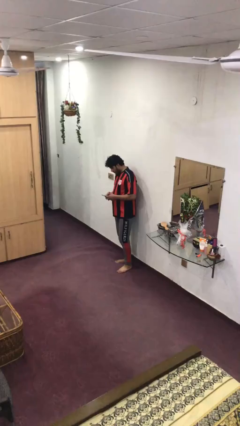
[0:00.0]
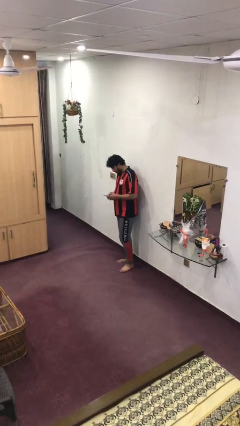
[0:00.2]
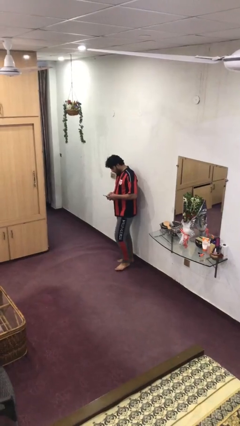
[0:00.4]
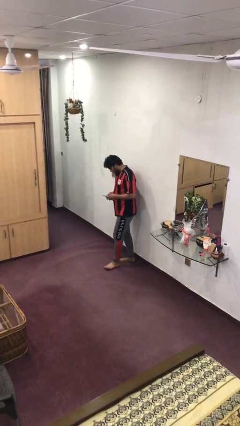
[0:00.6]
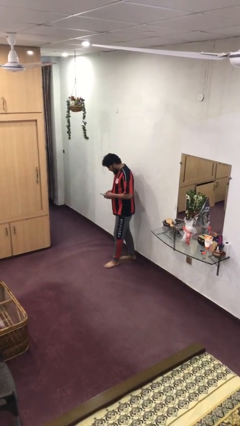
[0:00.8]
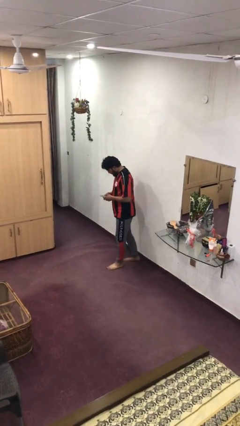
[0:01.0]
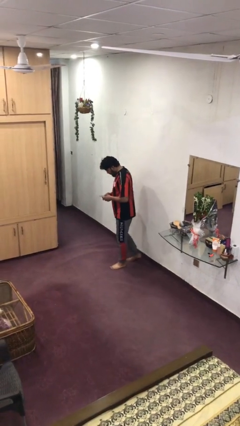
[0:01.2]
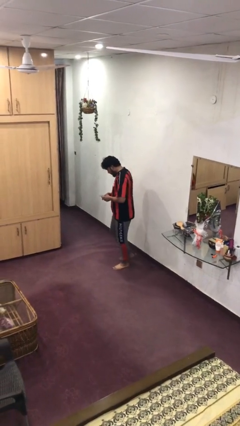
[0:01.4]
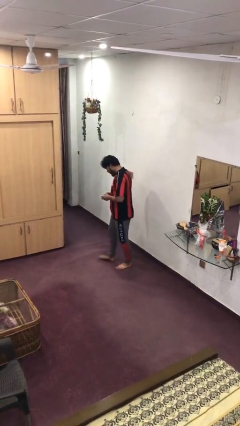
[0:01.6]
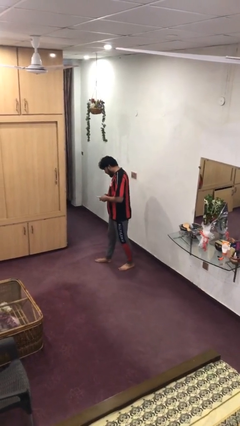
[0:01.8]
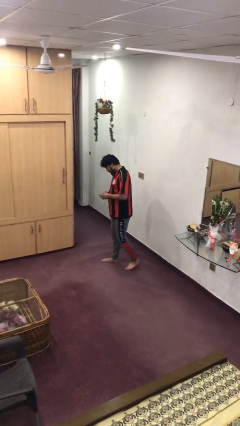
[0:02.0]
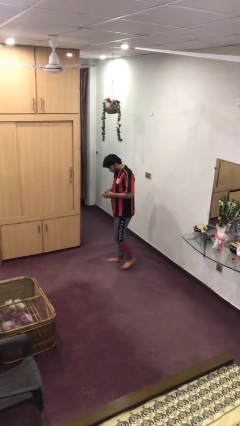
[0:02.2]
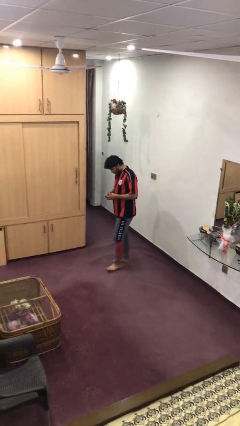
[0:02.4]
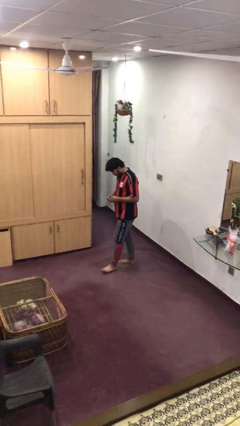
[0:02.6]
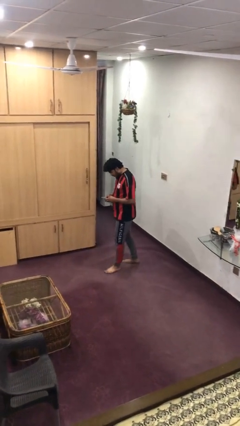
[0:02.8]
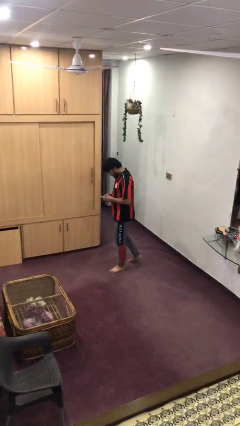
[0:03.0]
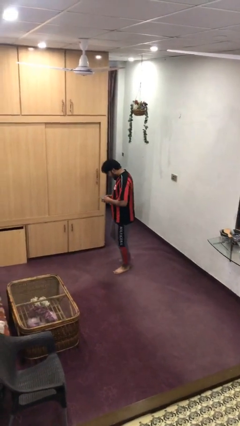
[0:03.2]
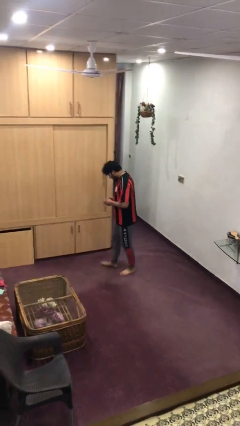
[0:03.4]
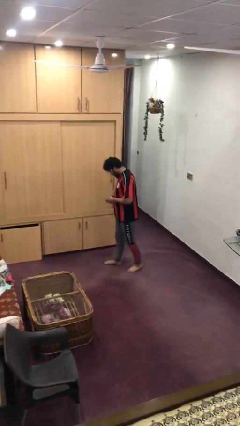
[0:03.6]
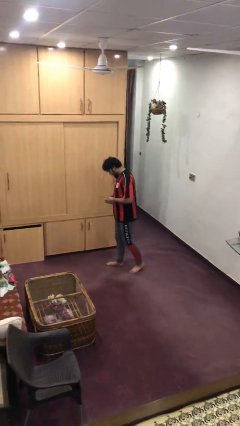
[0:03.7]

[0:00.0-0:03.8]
person texts on phone

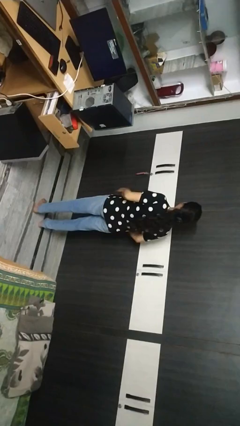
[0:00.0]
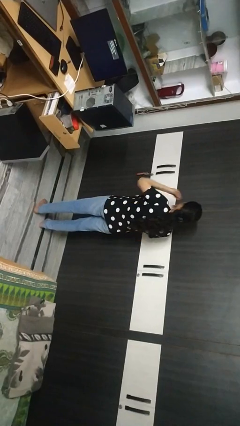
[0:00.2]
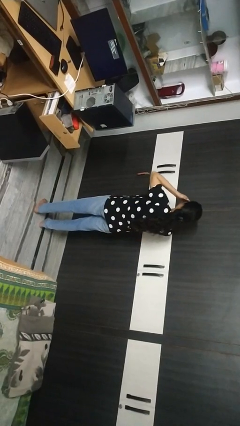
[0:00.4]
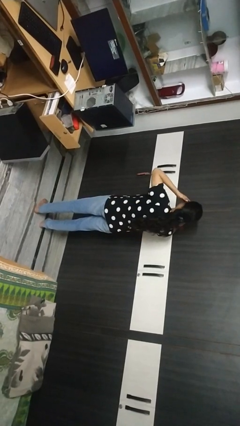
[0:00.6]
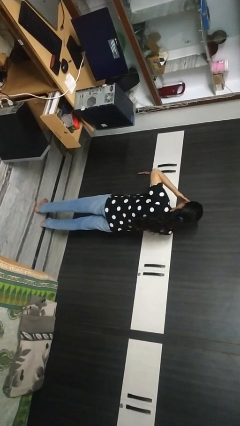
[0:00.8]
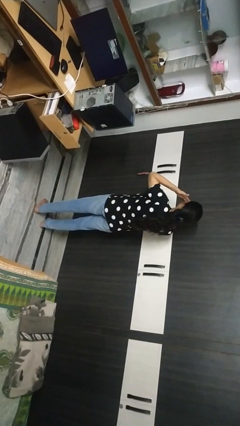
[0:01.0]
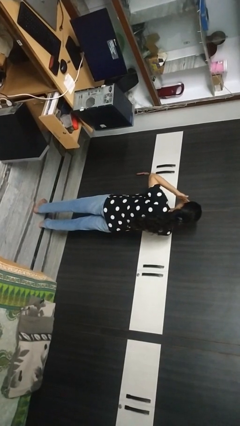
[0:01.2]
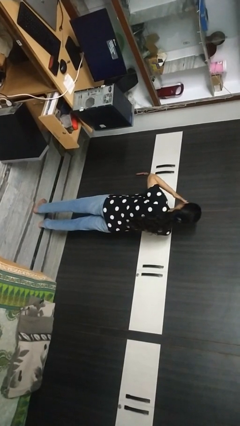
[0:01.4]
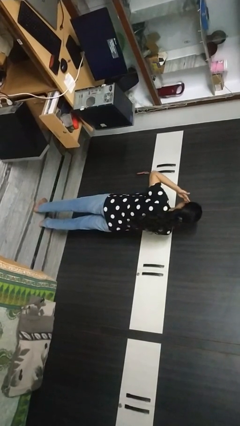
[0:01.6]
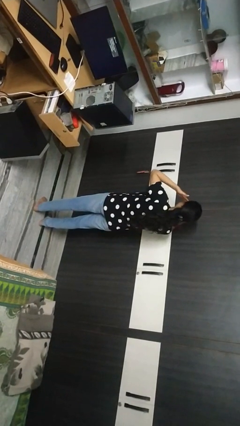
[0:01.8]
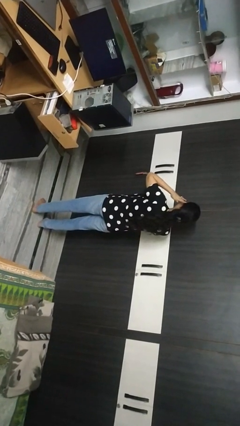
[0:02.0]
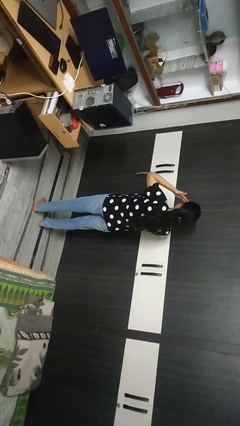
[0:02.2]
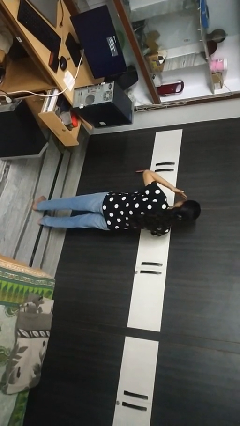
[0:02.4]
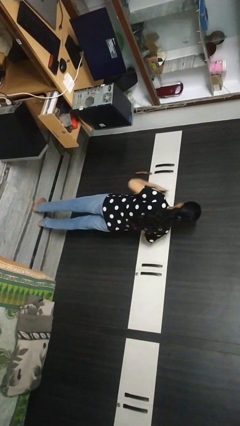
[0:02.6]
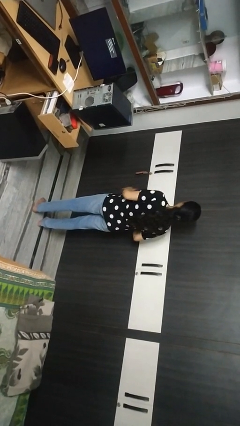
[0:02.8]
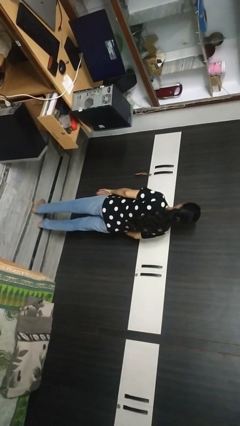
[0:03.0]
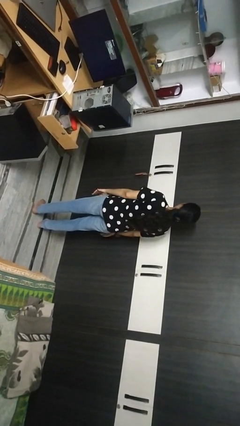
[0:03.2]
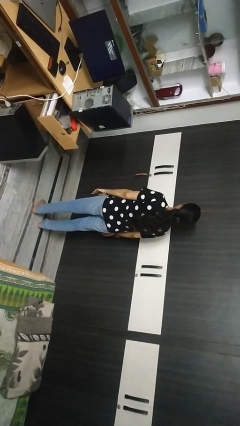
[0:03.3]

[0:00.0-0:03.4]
person rubs eyes

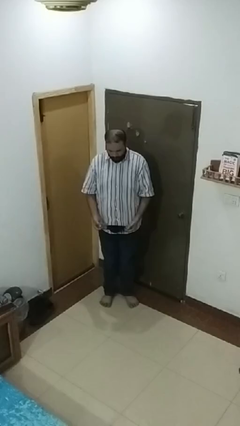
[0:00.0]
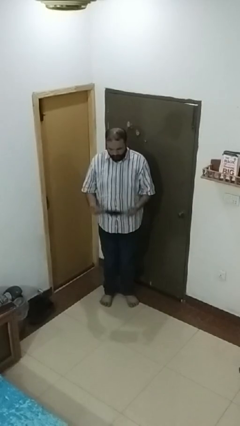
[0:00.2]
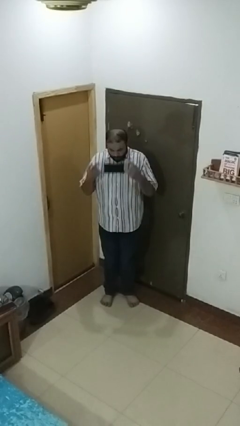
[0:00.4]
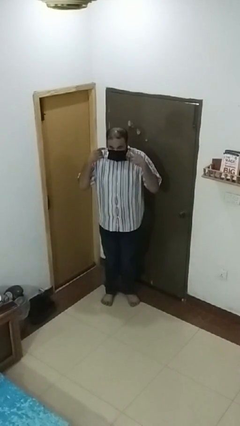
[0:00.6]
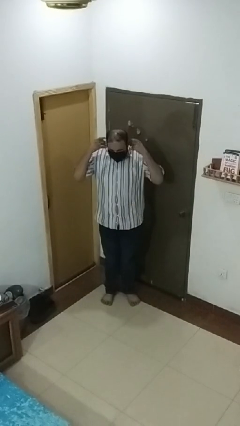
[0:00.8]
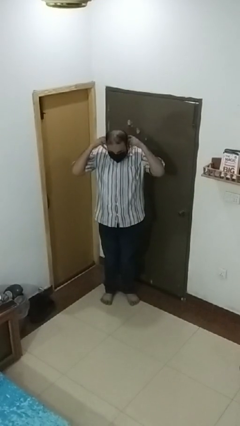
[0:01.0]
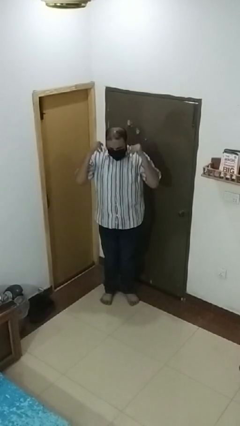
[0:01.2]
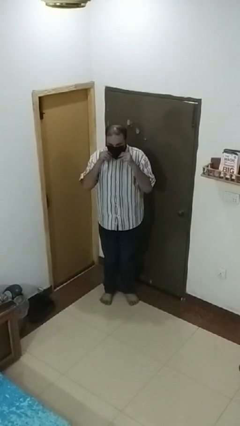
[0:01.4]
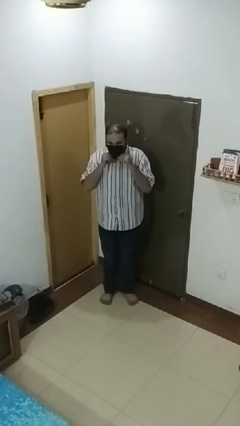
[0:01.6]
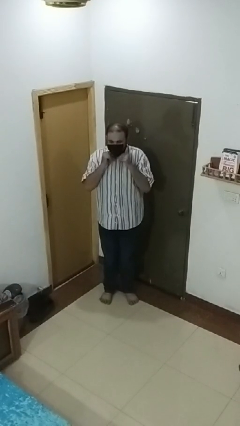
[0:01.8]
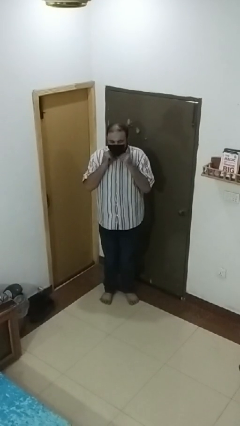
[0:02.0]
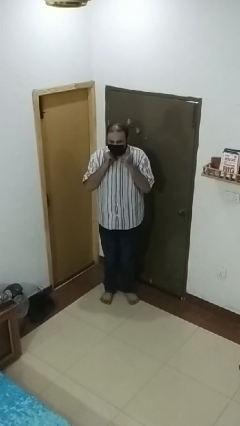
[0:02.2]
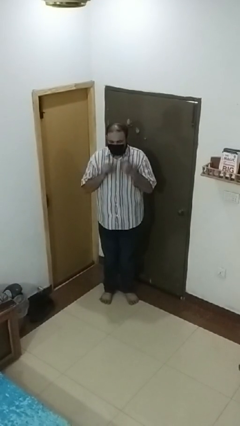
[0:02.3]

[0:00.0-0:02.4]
person puts on facemask

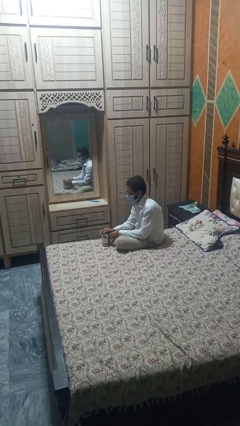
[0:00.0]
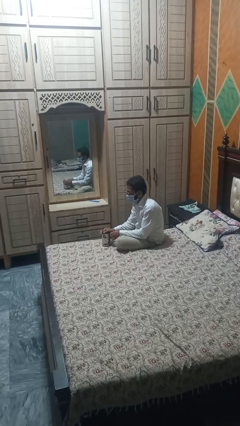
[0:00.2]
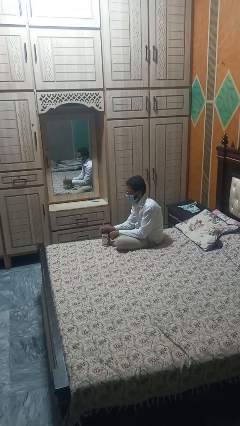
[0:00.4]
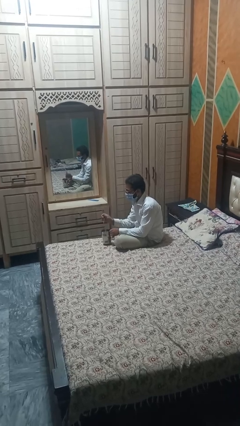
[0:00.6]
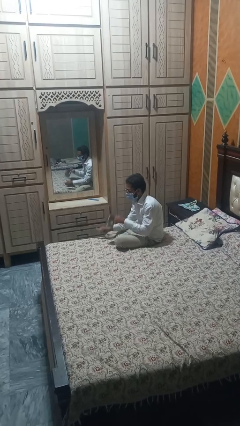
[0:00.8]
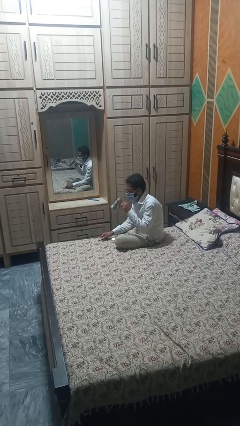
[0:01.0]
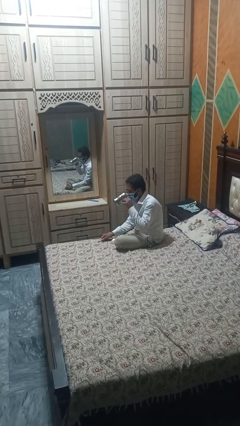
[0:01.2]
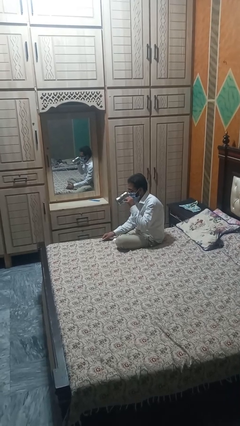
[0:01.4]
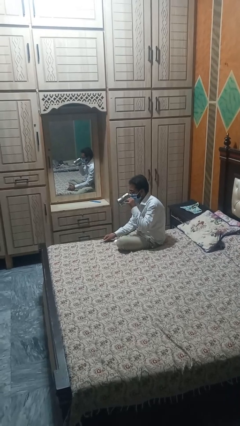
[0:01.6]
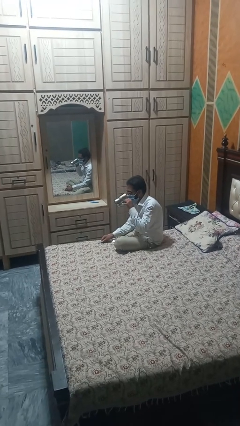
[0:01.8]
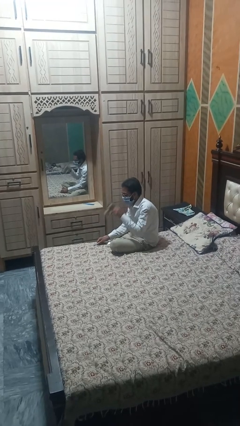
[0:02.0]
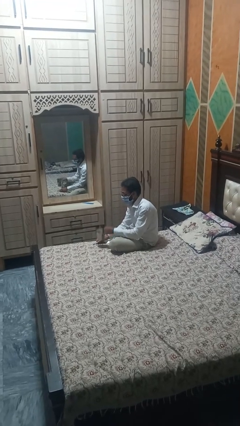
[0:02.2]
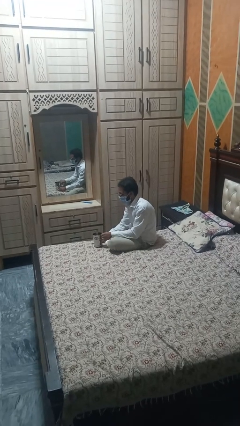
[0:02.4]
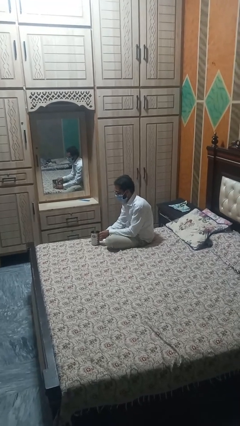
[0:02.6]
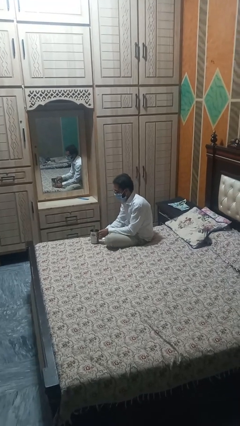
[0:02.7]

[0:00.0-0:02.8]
person drinks from mug

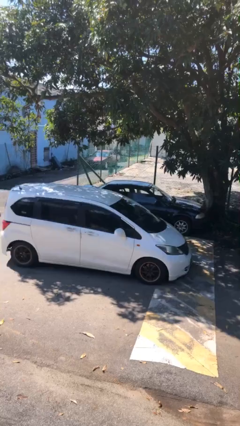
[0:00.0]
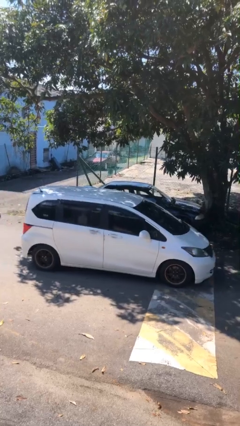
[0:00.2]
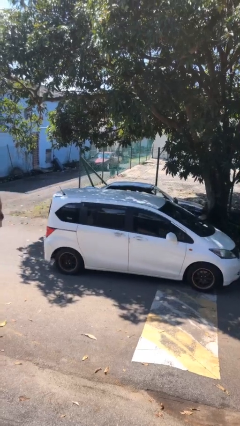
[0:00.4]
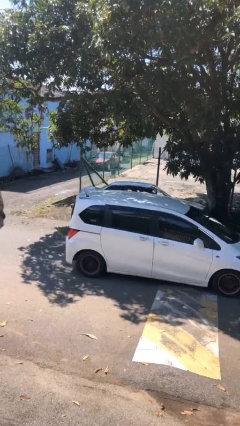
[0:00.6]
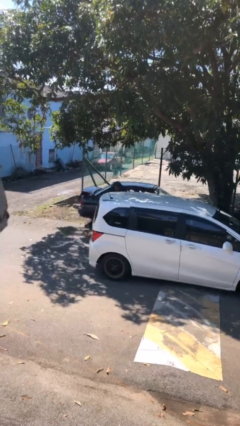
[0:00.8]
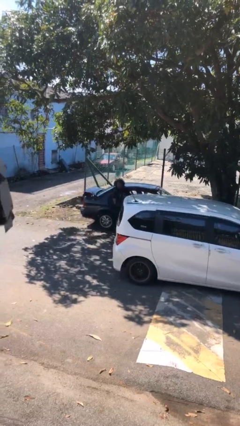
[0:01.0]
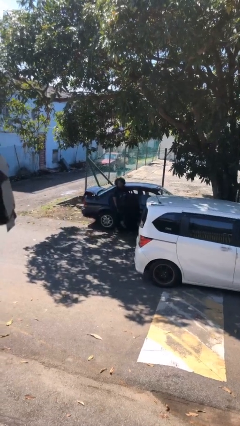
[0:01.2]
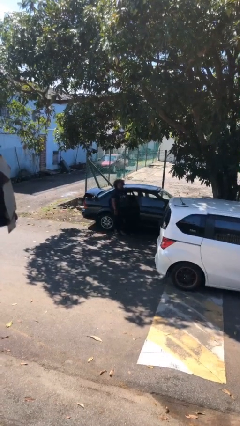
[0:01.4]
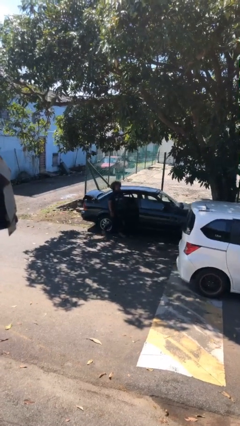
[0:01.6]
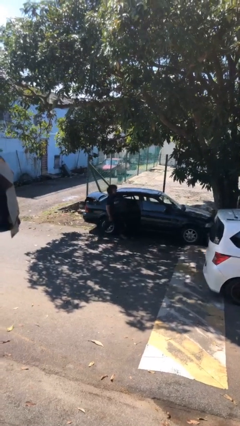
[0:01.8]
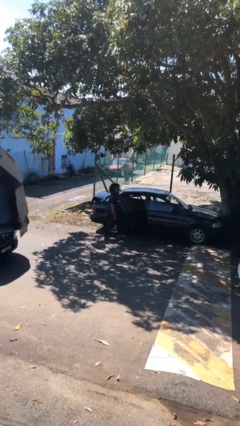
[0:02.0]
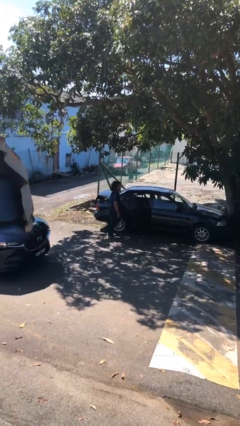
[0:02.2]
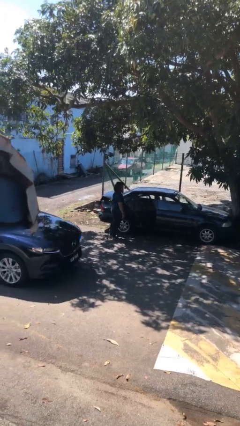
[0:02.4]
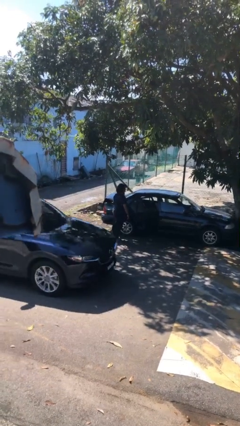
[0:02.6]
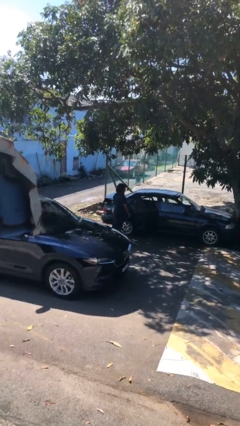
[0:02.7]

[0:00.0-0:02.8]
person exits car

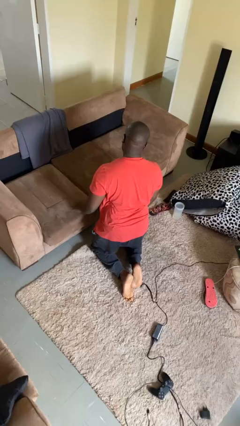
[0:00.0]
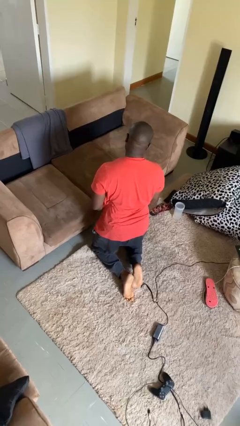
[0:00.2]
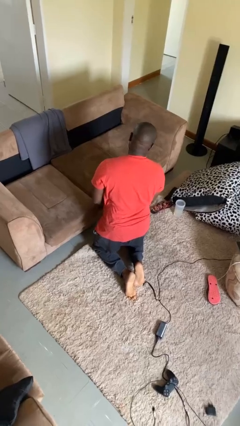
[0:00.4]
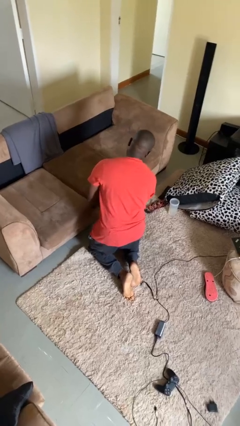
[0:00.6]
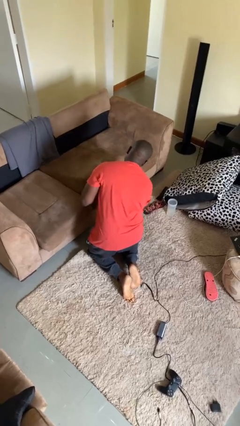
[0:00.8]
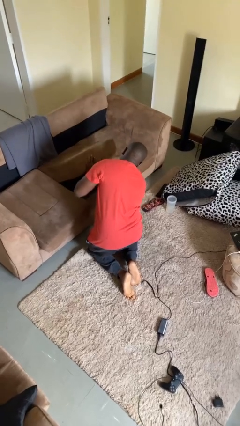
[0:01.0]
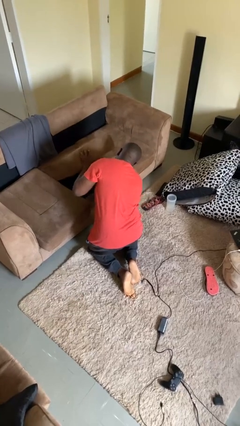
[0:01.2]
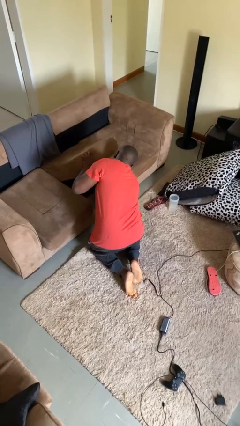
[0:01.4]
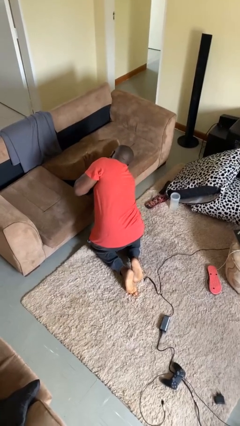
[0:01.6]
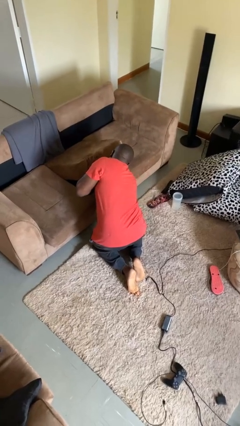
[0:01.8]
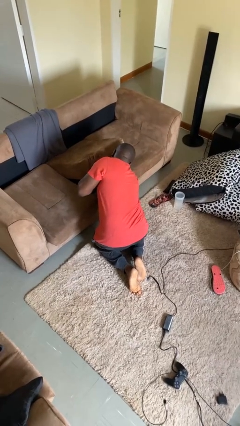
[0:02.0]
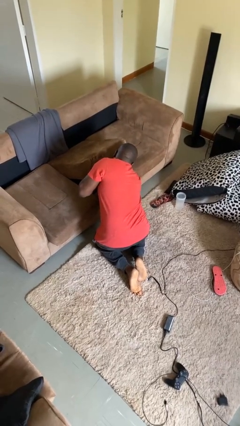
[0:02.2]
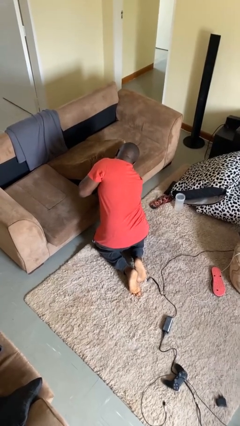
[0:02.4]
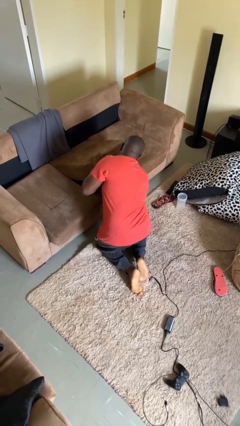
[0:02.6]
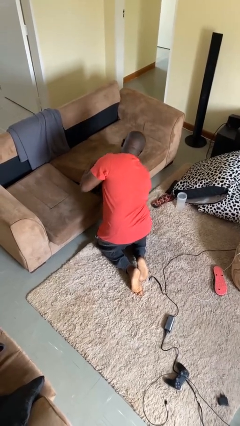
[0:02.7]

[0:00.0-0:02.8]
person searches under couch
